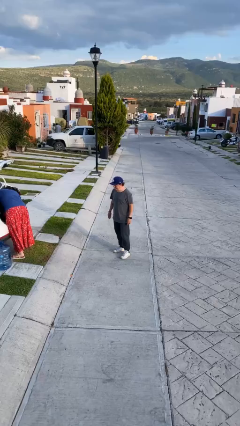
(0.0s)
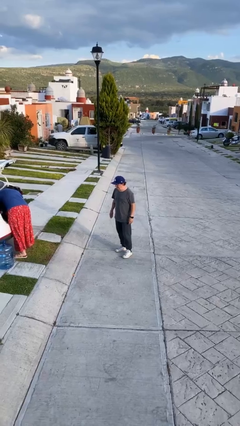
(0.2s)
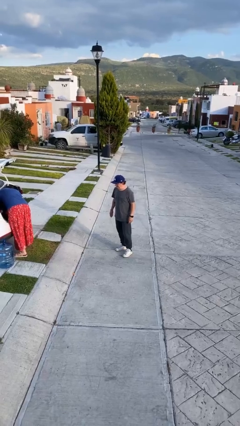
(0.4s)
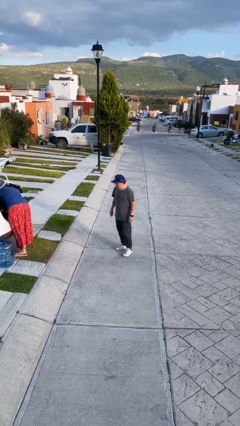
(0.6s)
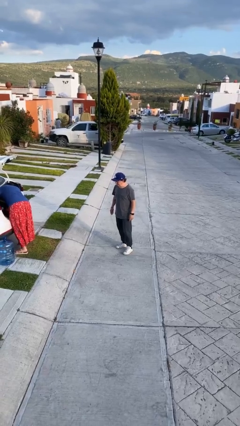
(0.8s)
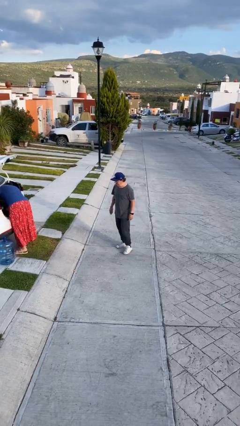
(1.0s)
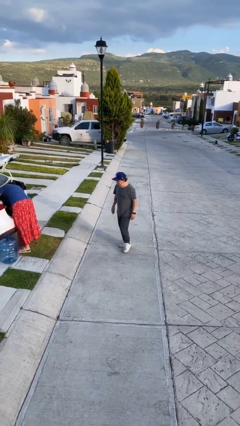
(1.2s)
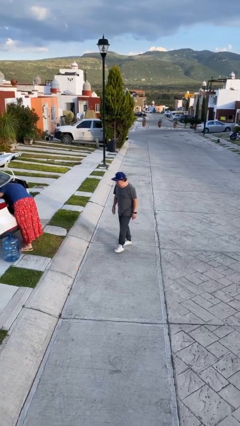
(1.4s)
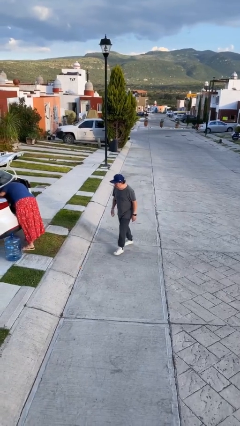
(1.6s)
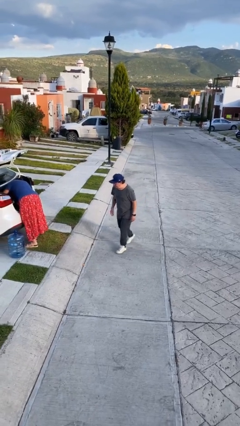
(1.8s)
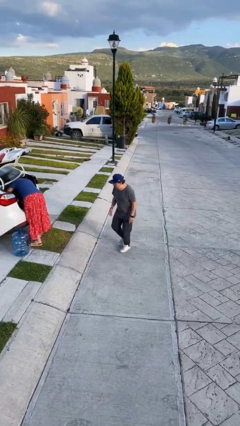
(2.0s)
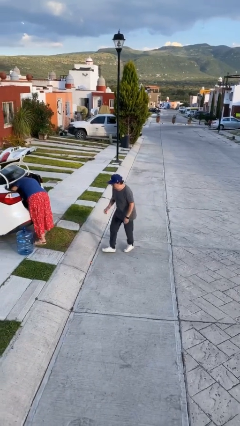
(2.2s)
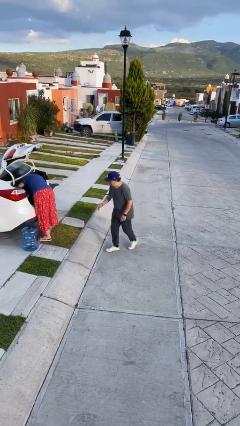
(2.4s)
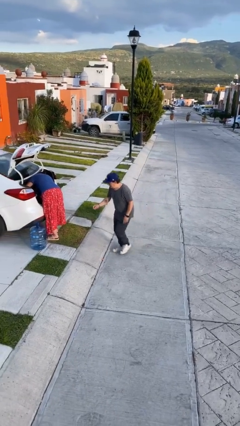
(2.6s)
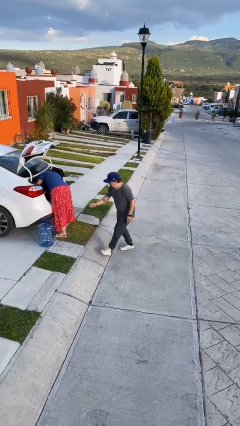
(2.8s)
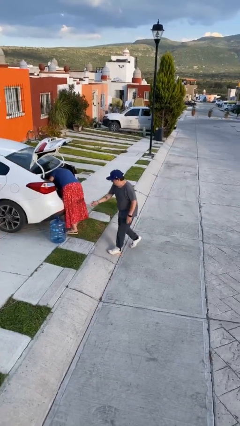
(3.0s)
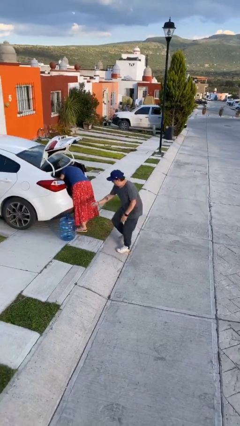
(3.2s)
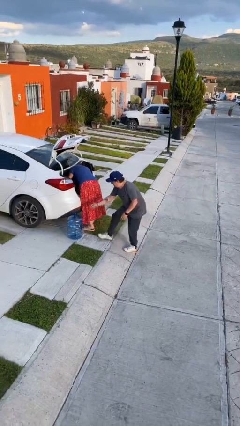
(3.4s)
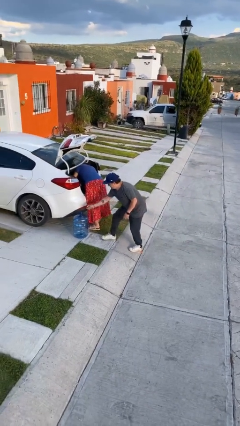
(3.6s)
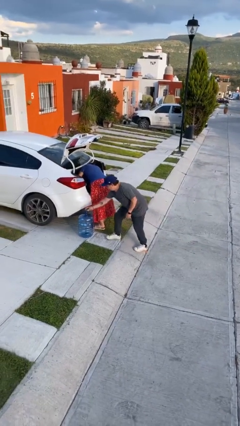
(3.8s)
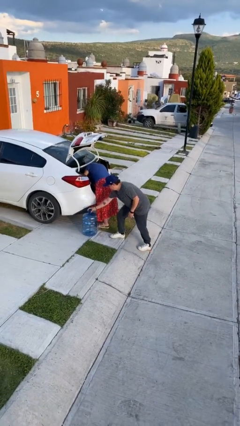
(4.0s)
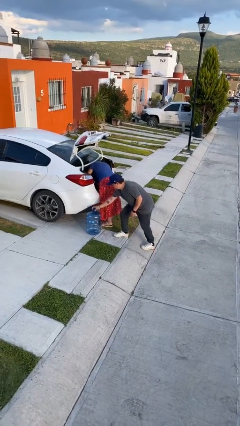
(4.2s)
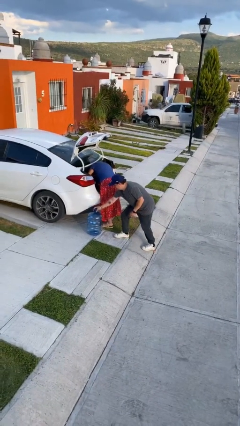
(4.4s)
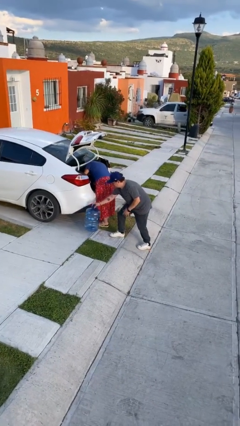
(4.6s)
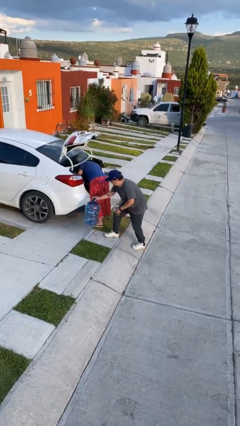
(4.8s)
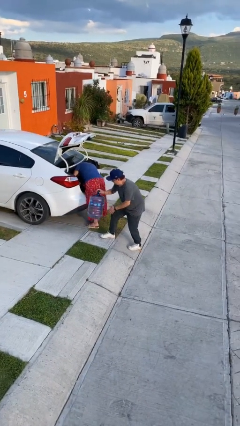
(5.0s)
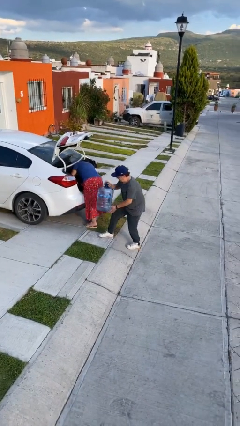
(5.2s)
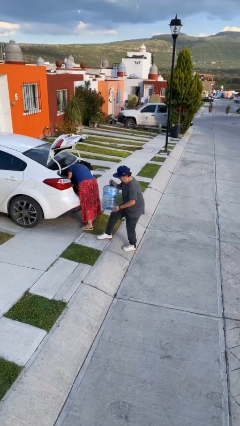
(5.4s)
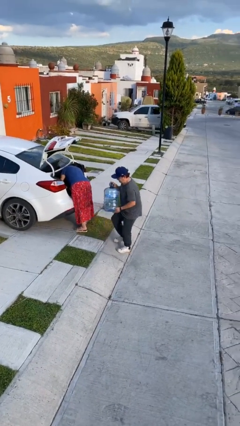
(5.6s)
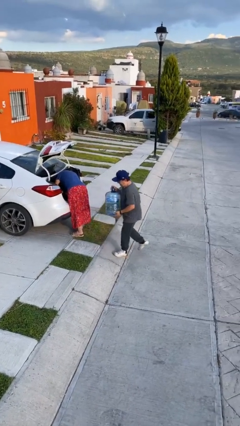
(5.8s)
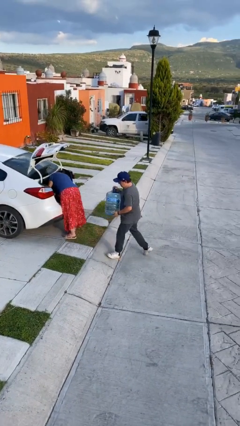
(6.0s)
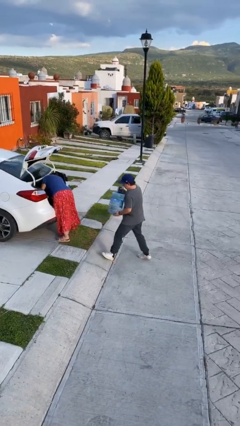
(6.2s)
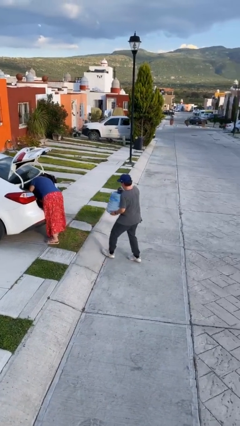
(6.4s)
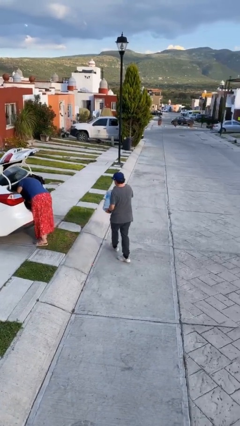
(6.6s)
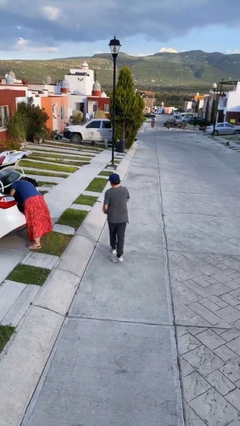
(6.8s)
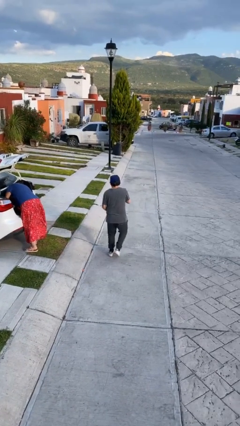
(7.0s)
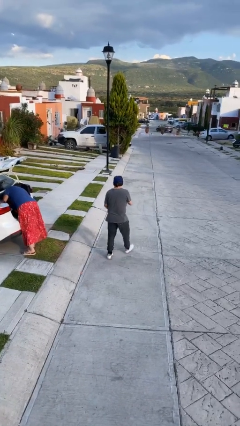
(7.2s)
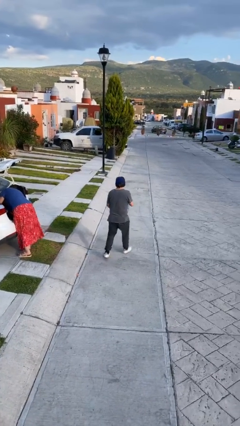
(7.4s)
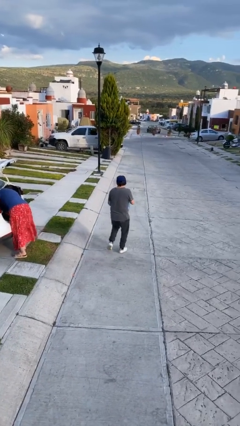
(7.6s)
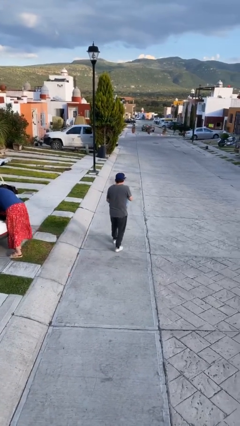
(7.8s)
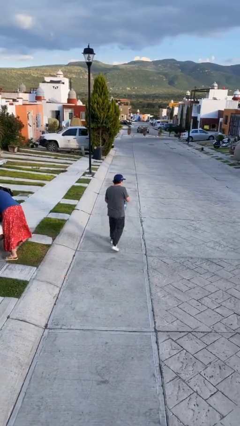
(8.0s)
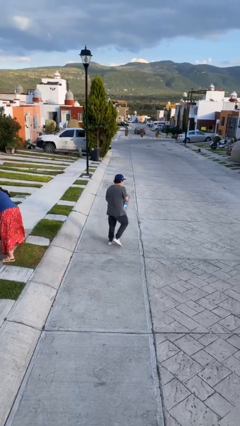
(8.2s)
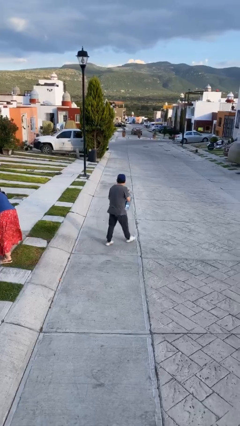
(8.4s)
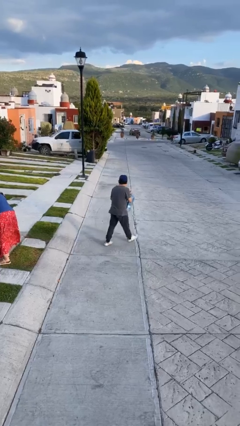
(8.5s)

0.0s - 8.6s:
person steals object from person

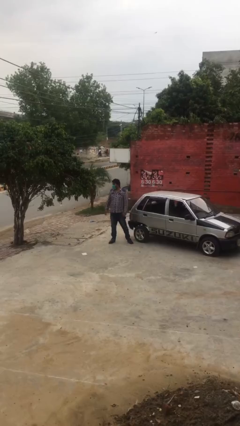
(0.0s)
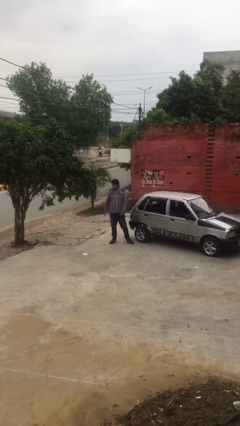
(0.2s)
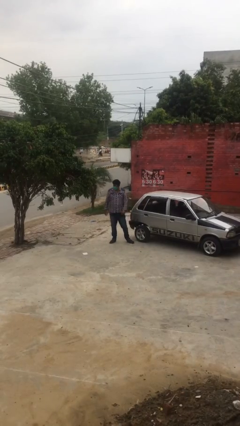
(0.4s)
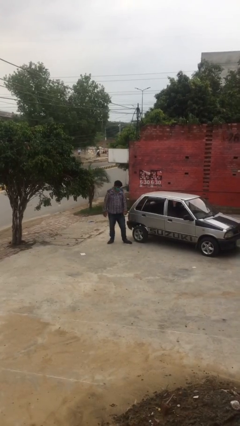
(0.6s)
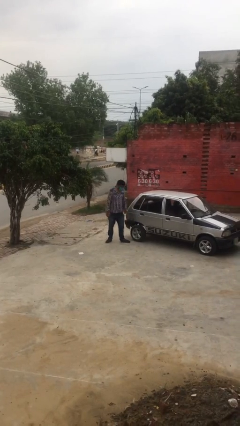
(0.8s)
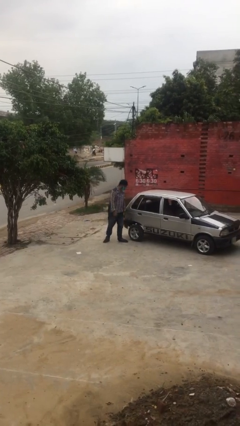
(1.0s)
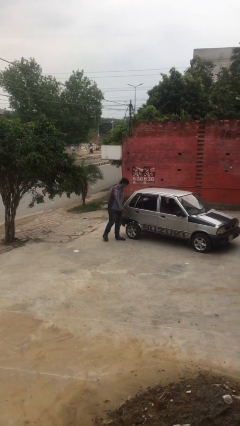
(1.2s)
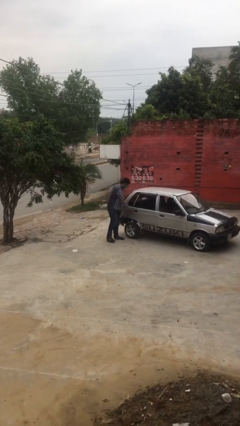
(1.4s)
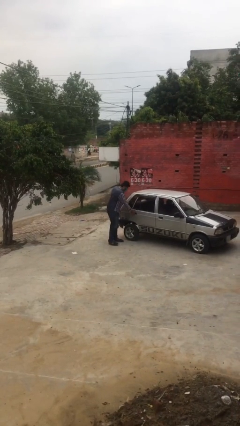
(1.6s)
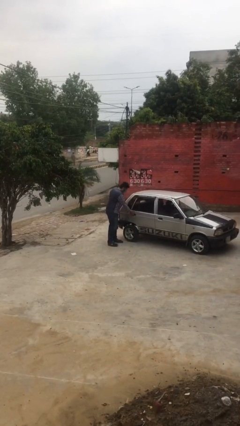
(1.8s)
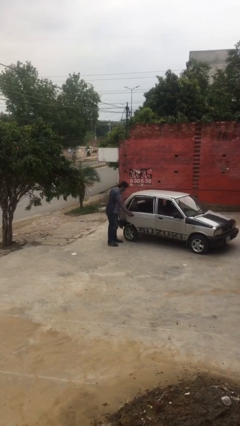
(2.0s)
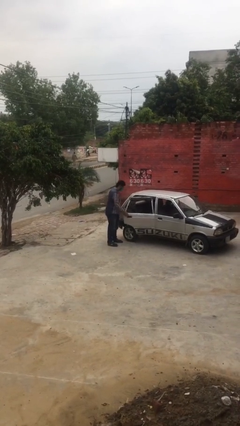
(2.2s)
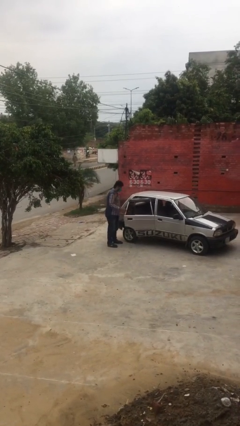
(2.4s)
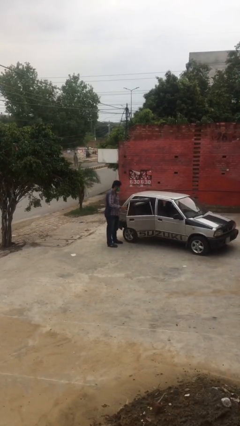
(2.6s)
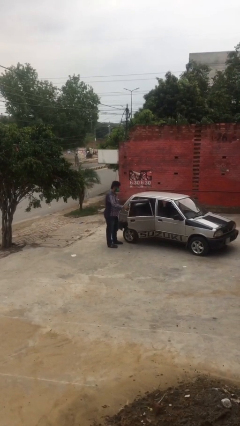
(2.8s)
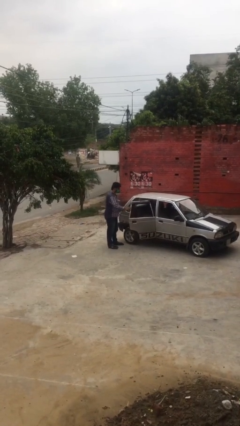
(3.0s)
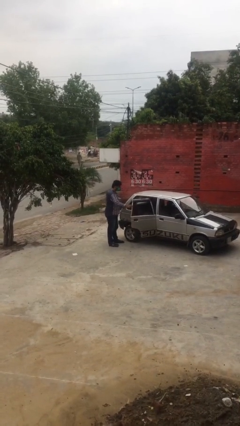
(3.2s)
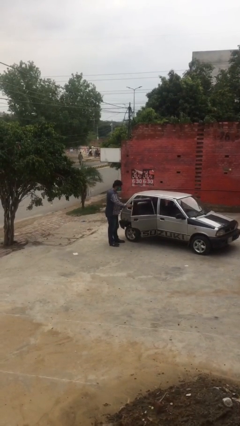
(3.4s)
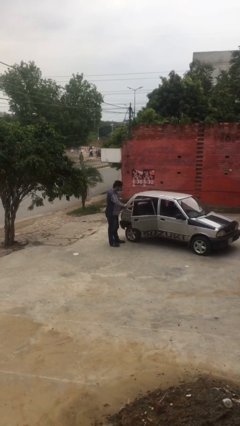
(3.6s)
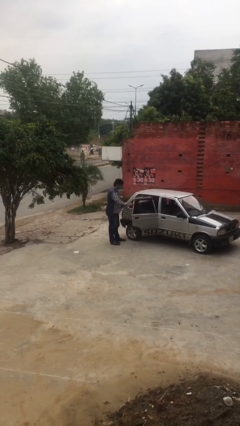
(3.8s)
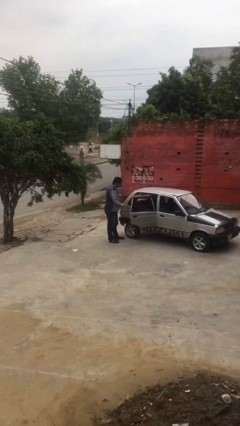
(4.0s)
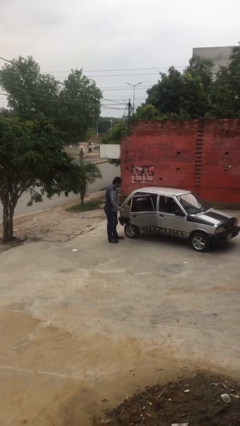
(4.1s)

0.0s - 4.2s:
person opens car door

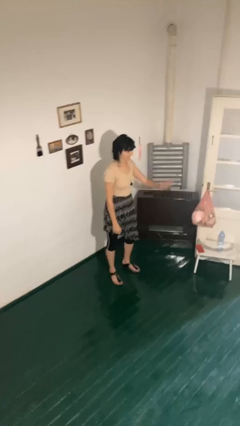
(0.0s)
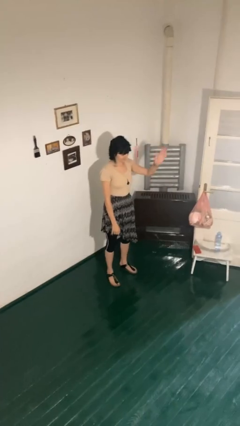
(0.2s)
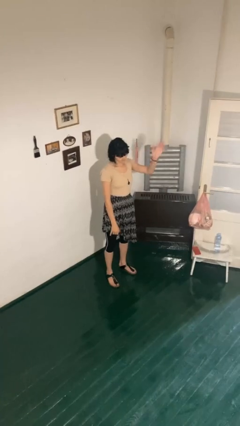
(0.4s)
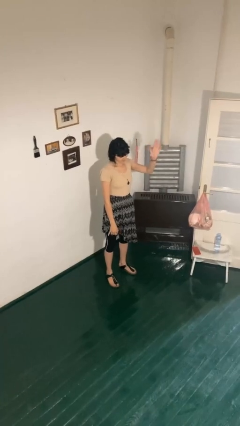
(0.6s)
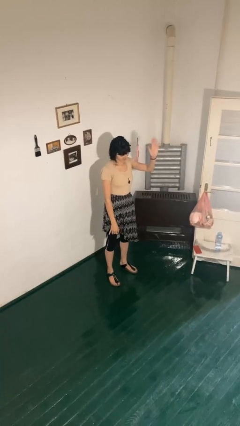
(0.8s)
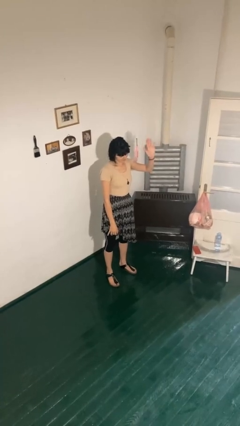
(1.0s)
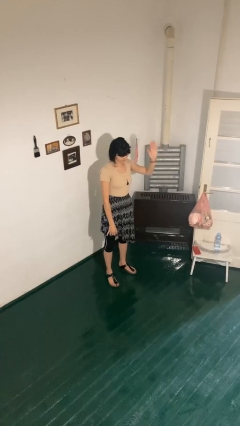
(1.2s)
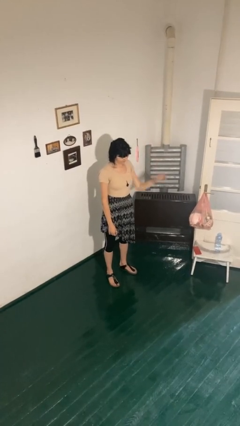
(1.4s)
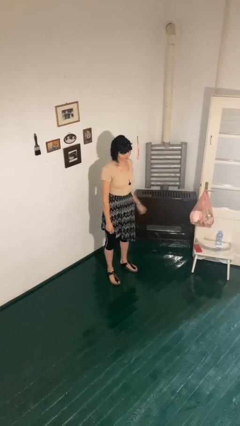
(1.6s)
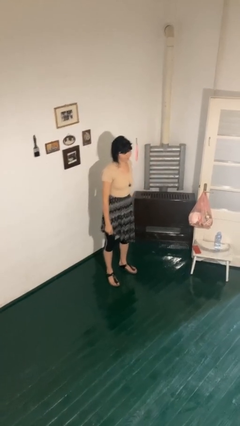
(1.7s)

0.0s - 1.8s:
person waves at person

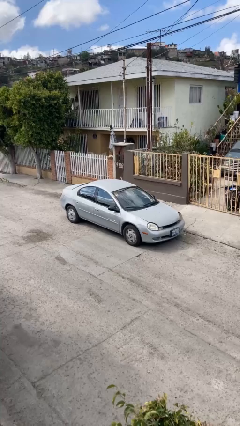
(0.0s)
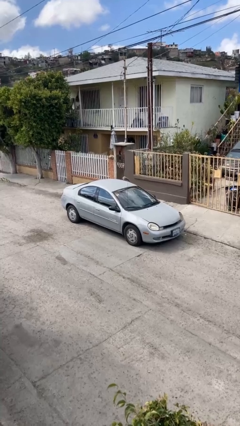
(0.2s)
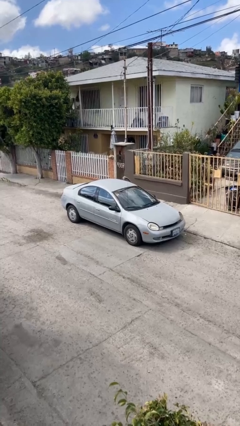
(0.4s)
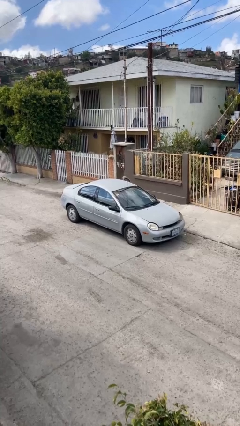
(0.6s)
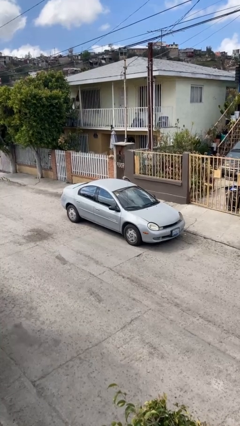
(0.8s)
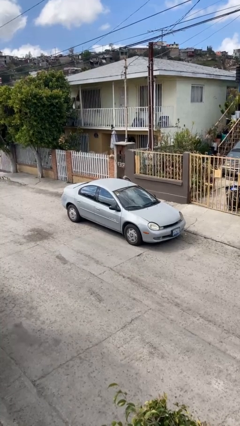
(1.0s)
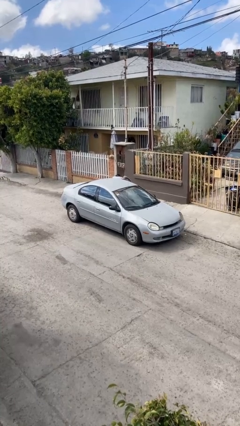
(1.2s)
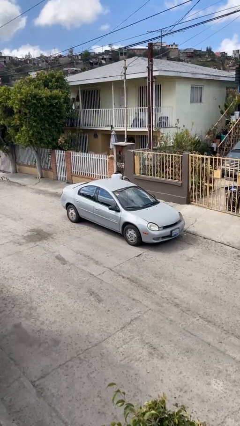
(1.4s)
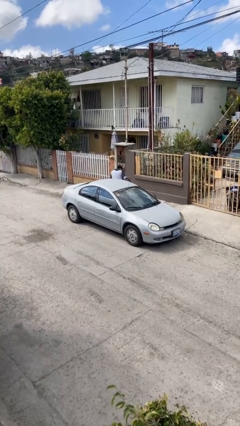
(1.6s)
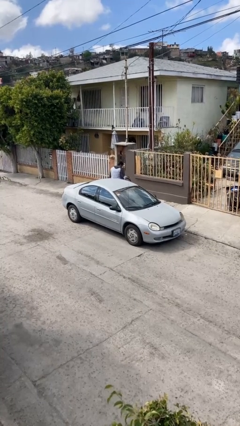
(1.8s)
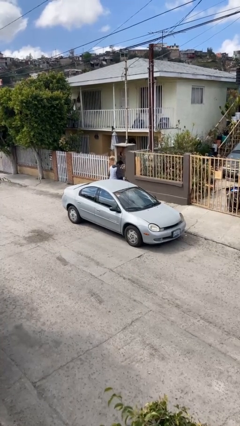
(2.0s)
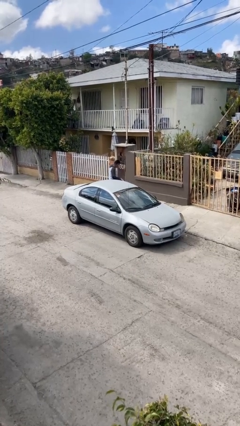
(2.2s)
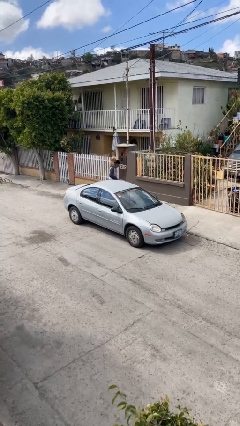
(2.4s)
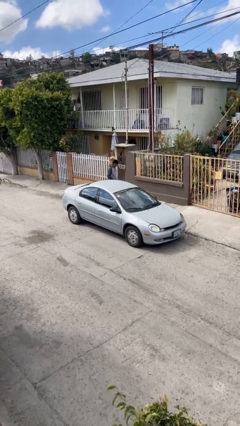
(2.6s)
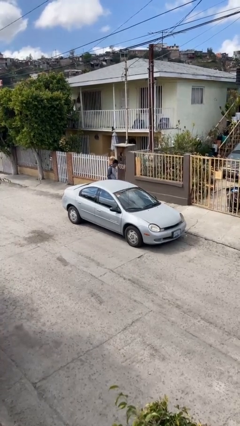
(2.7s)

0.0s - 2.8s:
car drops off person

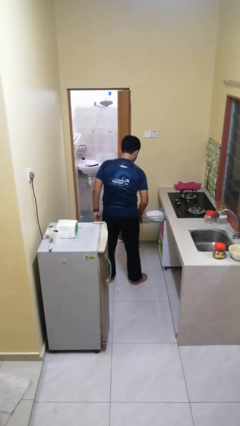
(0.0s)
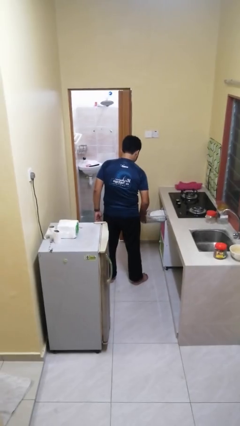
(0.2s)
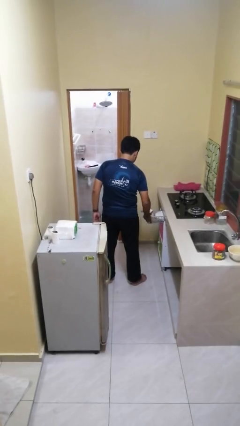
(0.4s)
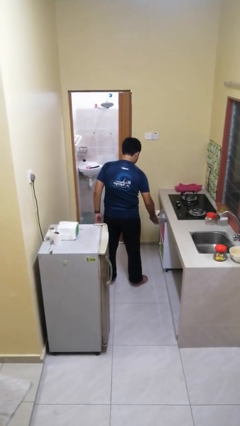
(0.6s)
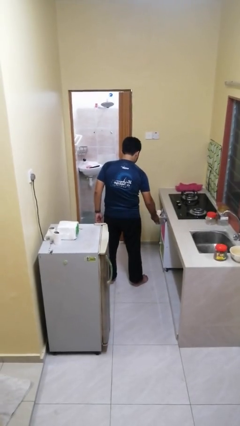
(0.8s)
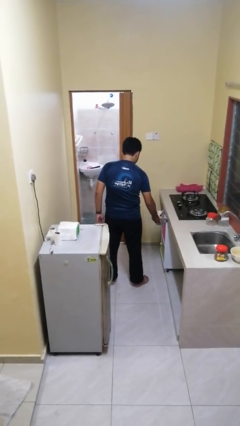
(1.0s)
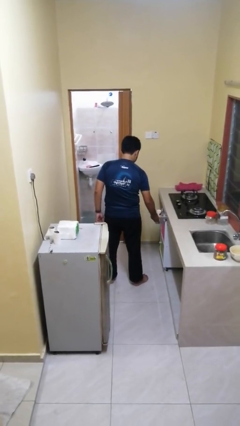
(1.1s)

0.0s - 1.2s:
person closes kitchen drawer
